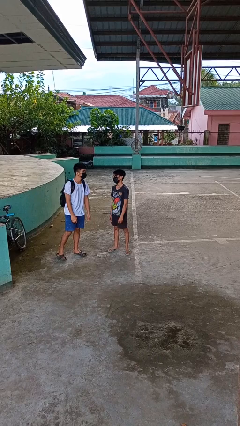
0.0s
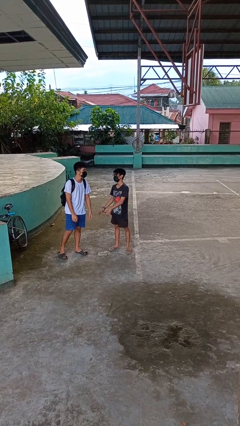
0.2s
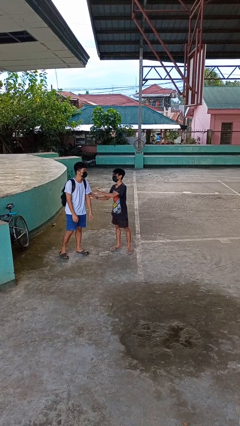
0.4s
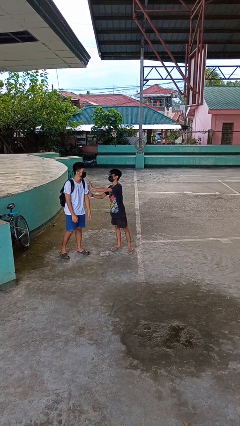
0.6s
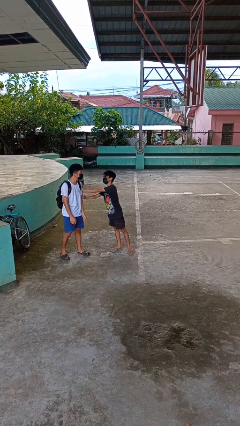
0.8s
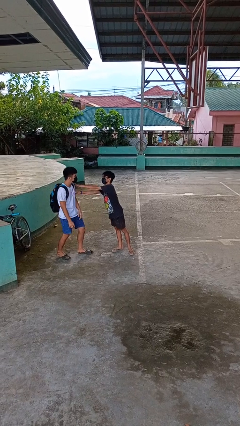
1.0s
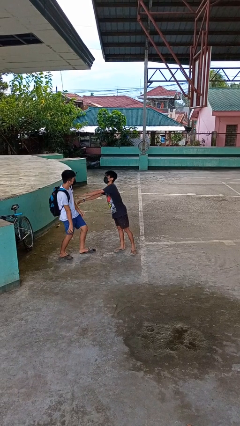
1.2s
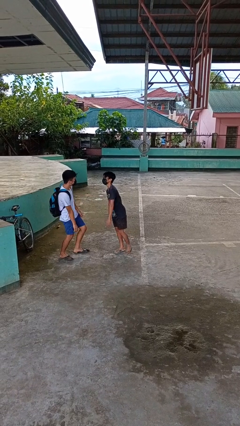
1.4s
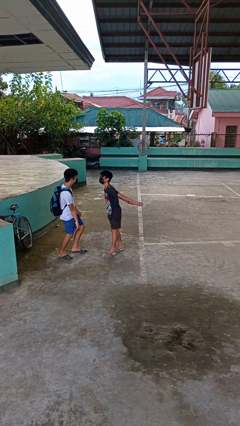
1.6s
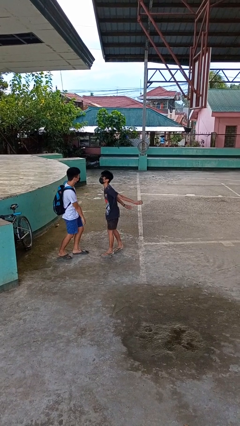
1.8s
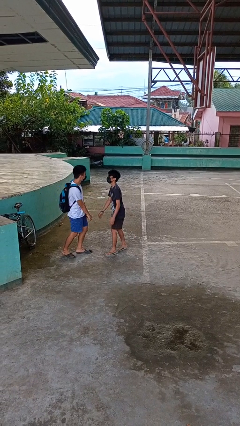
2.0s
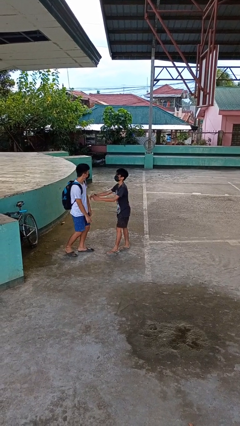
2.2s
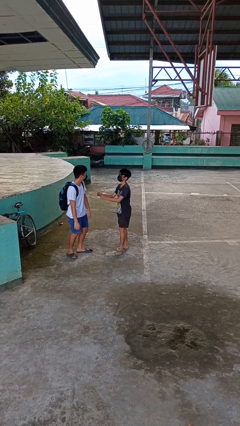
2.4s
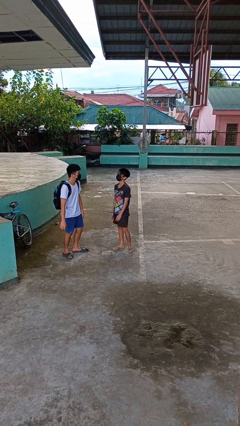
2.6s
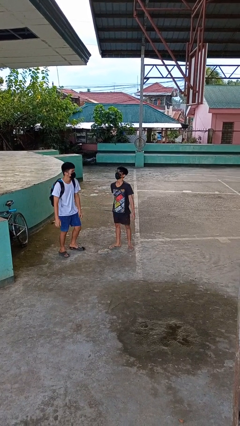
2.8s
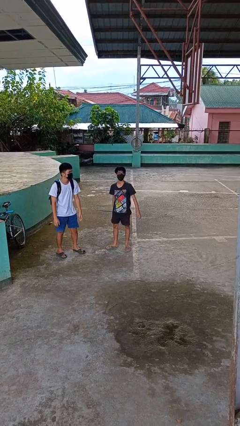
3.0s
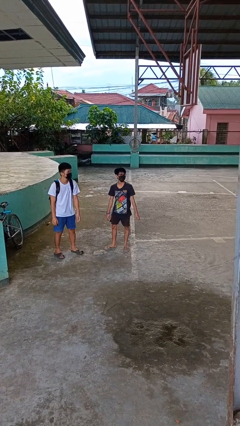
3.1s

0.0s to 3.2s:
person shoves person

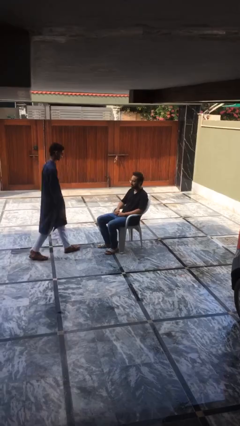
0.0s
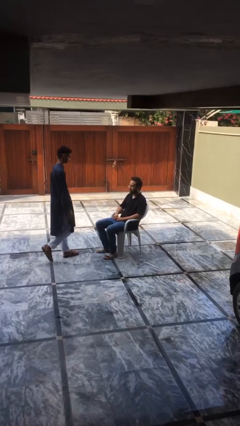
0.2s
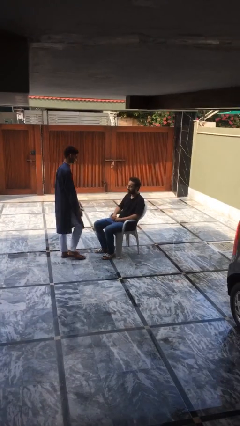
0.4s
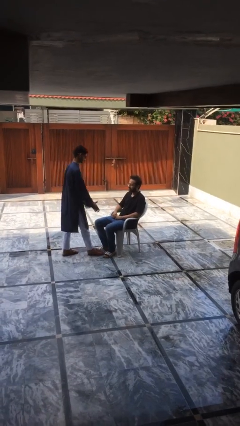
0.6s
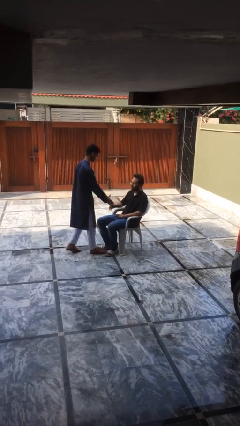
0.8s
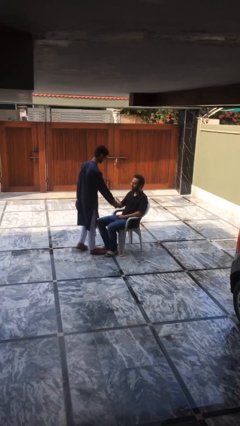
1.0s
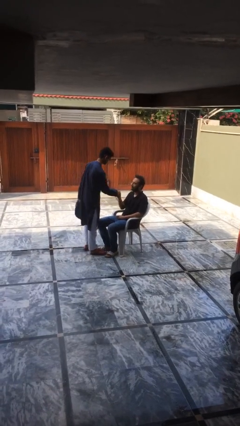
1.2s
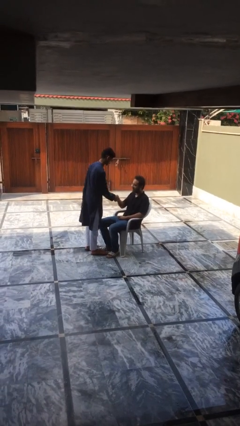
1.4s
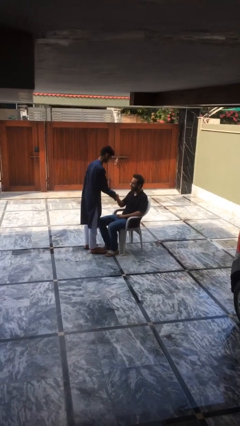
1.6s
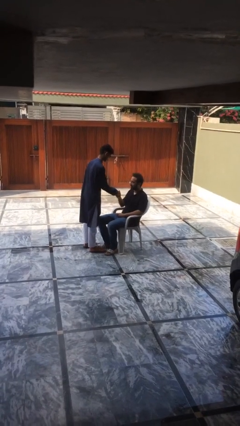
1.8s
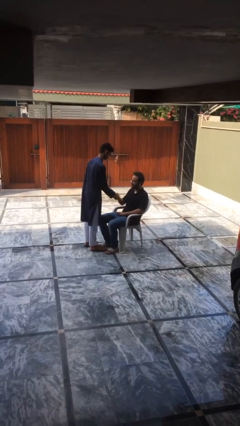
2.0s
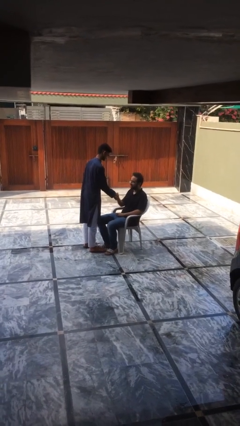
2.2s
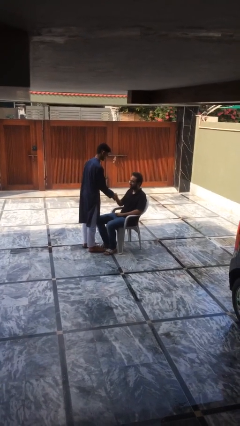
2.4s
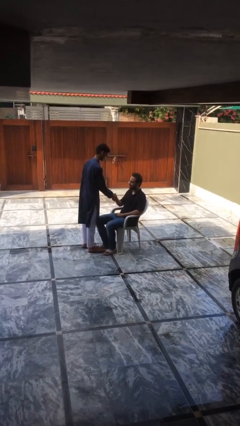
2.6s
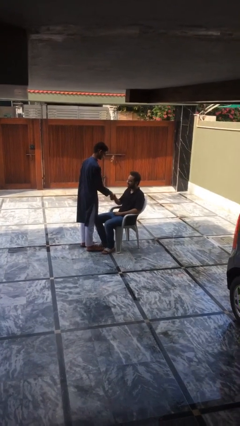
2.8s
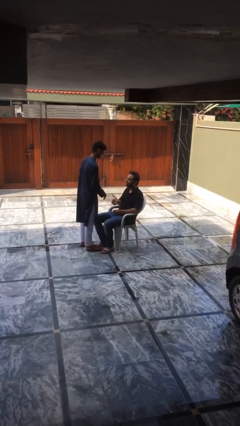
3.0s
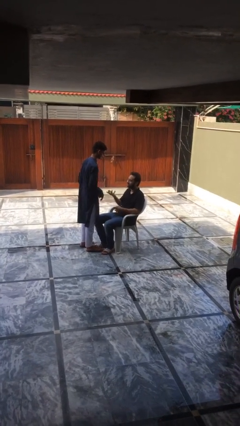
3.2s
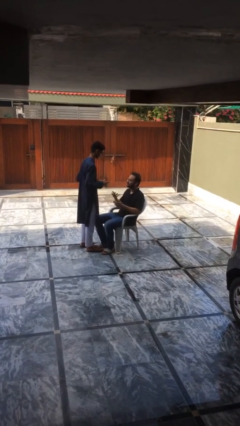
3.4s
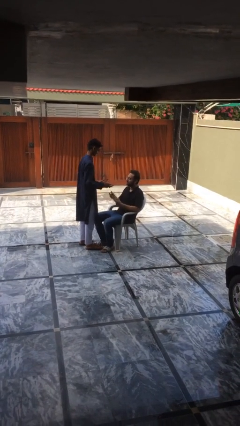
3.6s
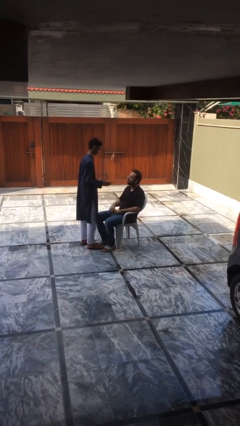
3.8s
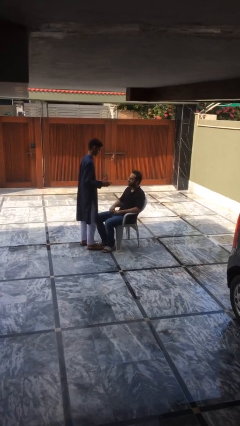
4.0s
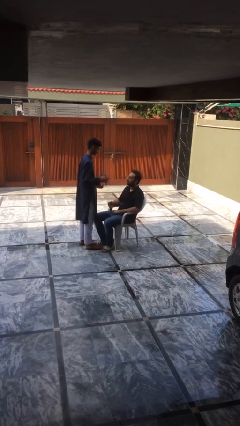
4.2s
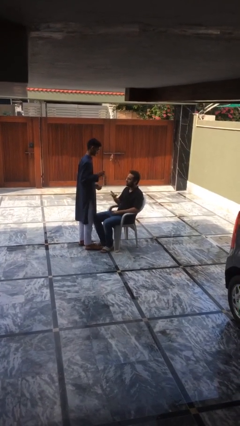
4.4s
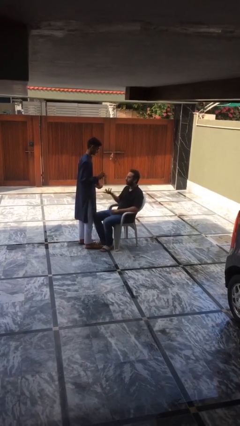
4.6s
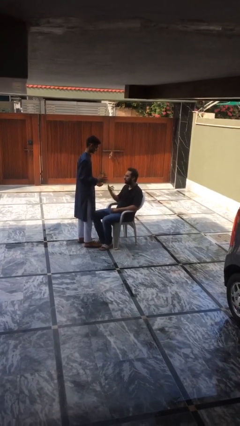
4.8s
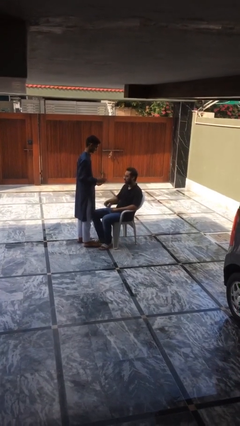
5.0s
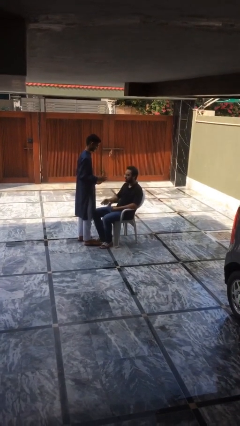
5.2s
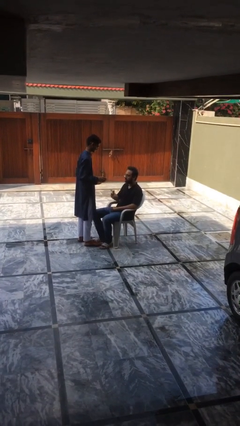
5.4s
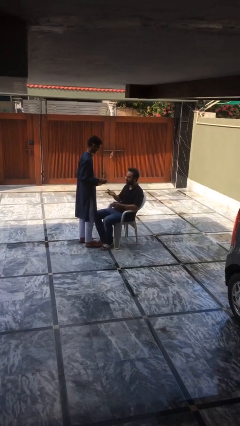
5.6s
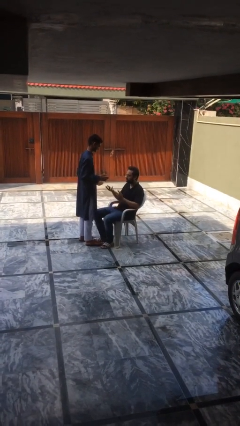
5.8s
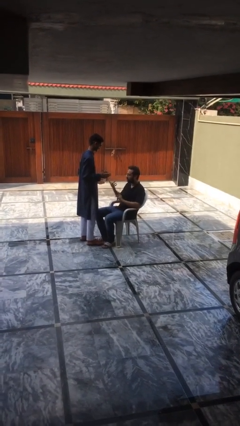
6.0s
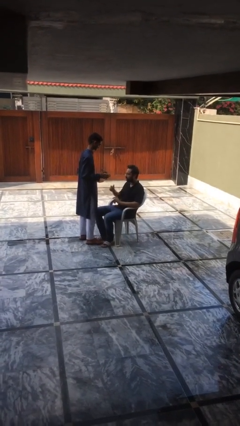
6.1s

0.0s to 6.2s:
person shakes hand

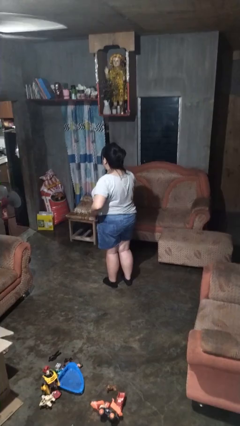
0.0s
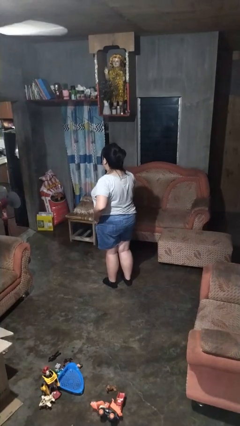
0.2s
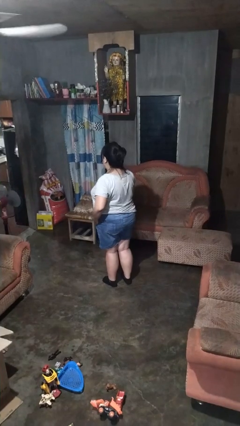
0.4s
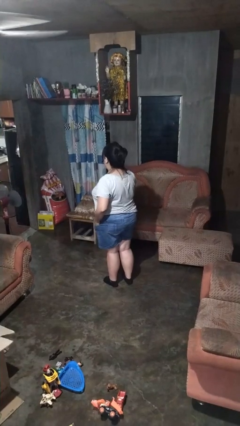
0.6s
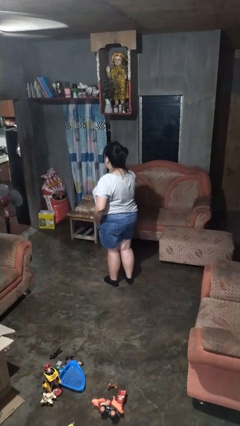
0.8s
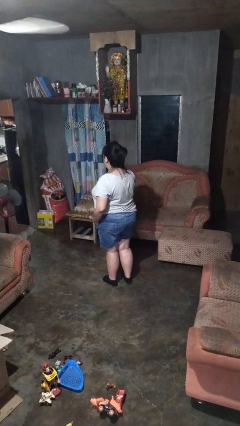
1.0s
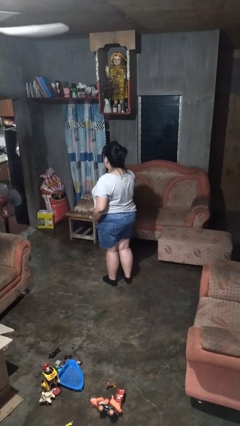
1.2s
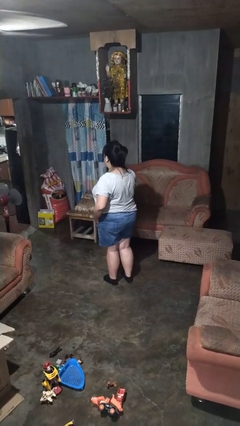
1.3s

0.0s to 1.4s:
person puts hands in back pockets

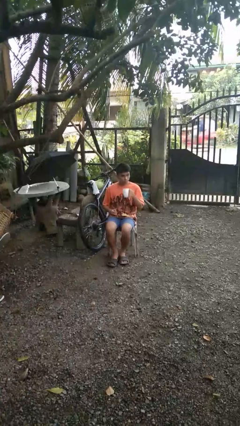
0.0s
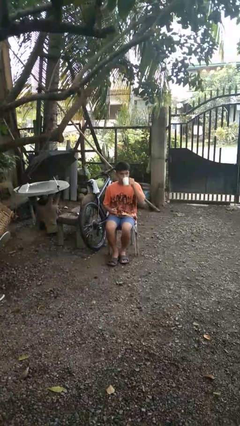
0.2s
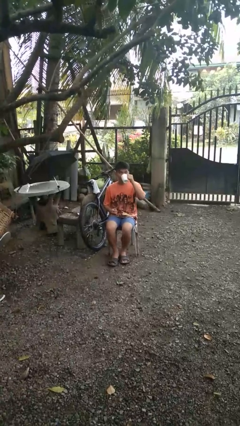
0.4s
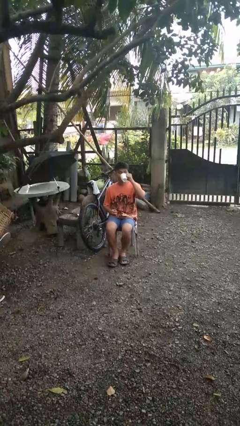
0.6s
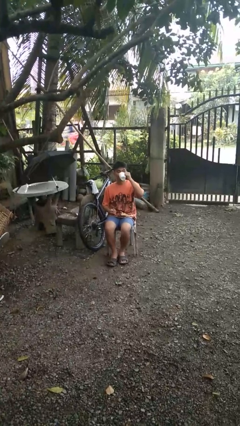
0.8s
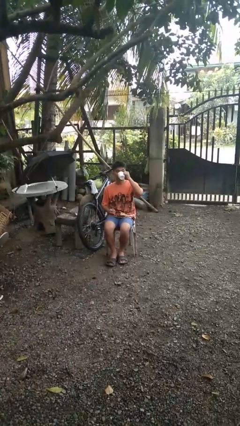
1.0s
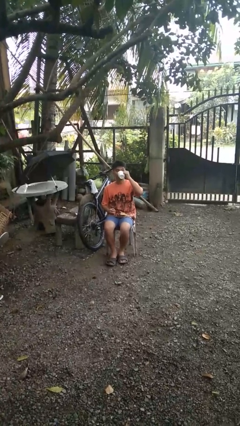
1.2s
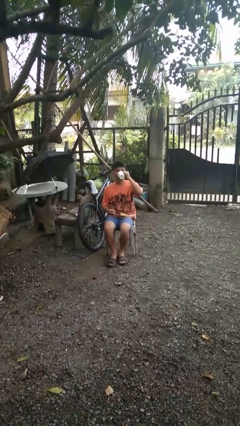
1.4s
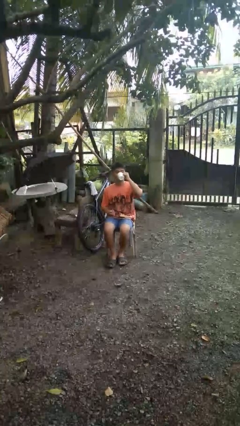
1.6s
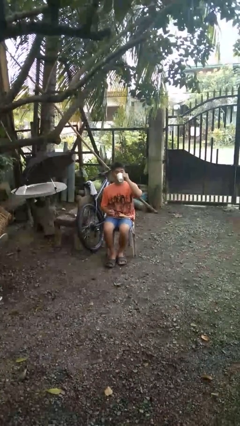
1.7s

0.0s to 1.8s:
person drinks from mug

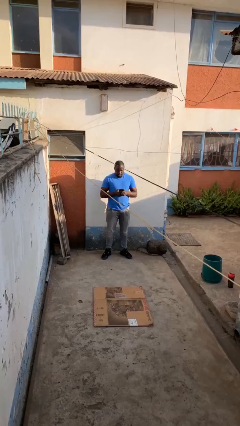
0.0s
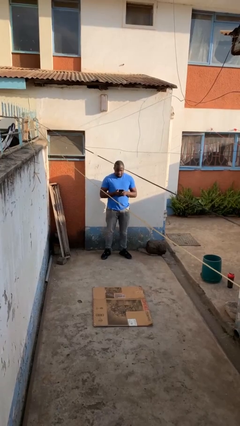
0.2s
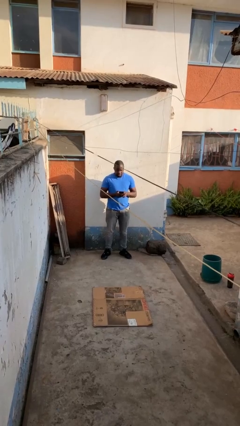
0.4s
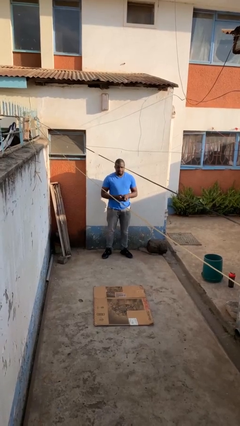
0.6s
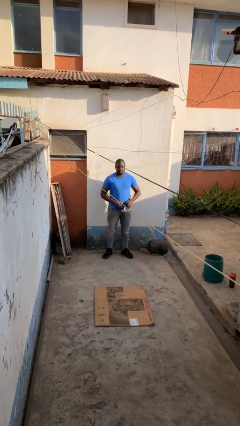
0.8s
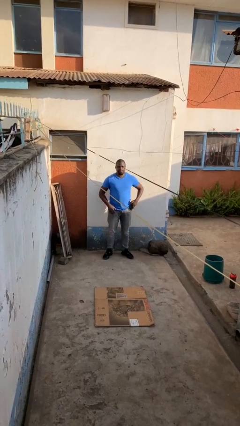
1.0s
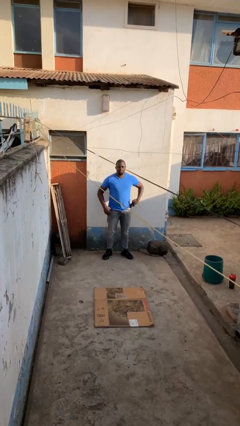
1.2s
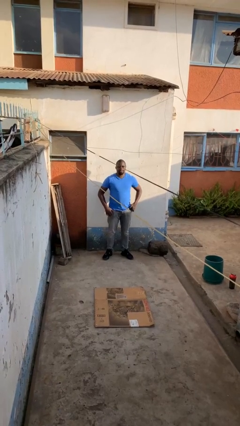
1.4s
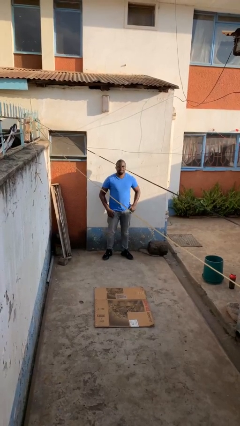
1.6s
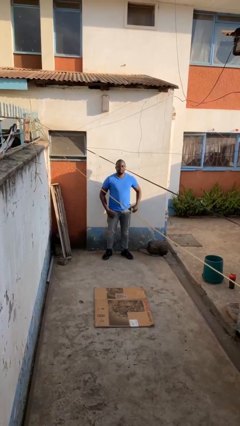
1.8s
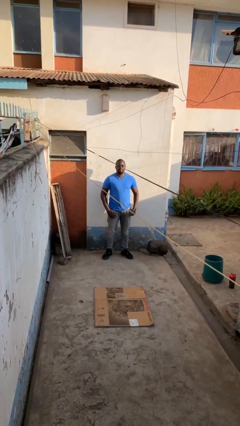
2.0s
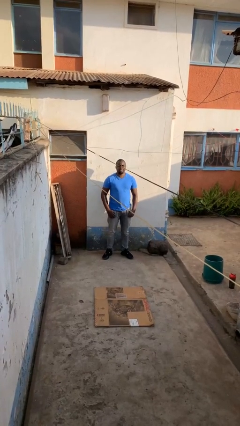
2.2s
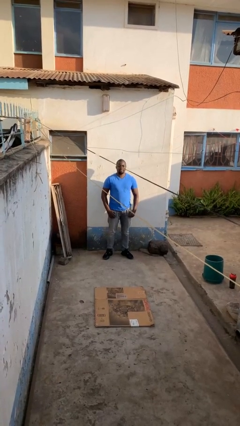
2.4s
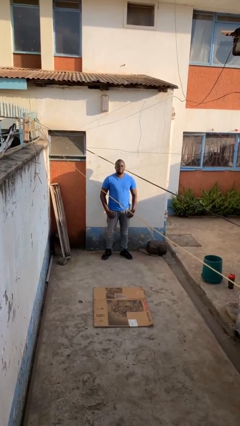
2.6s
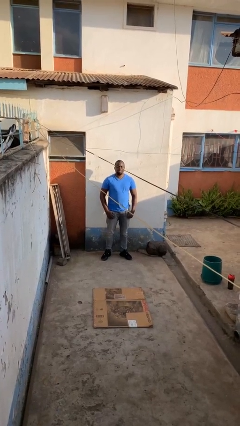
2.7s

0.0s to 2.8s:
person puts phone into pocket

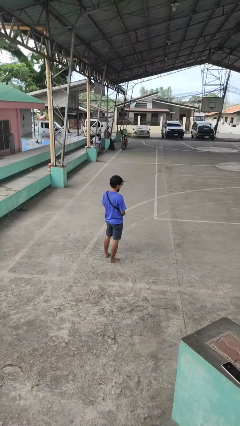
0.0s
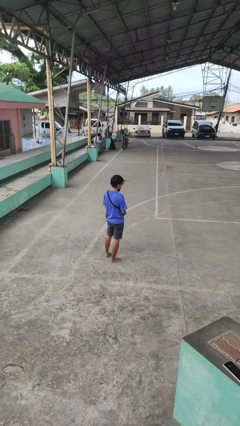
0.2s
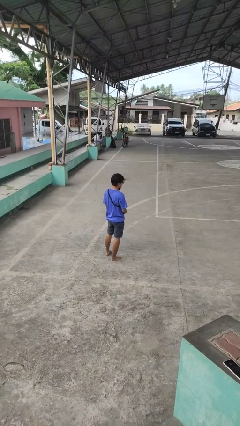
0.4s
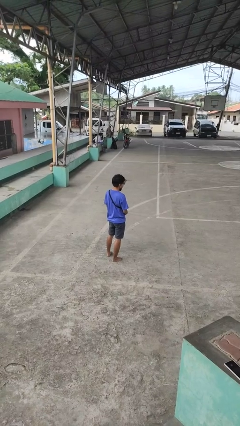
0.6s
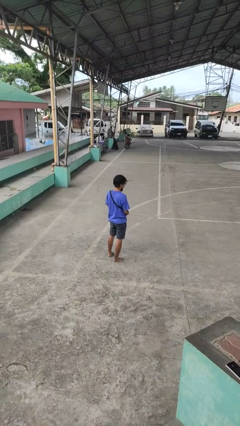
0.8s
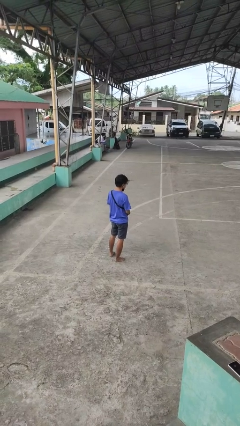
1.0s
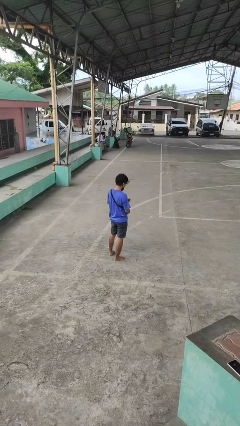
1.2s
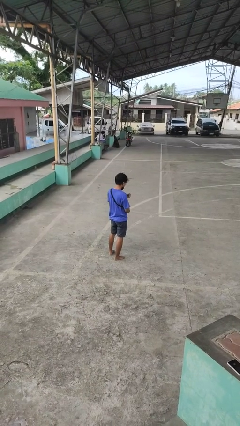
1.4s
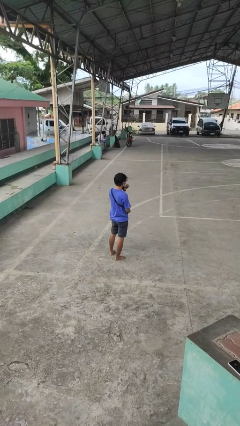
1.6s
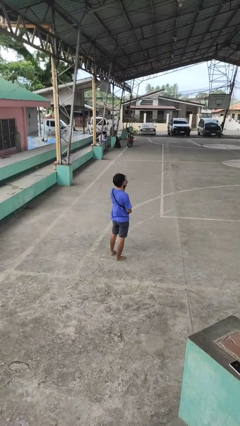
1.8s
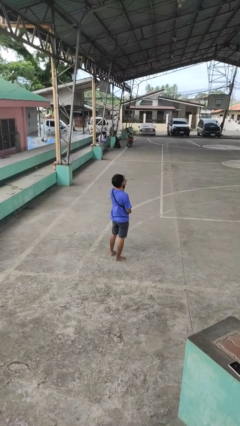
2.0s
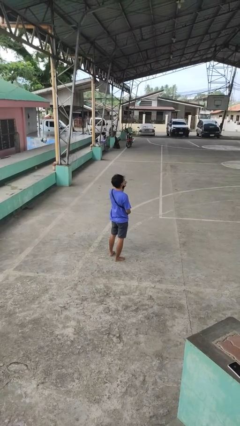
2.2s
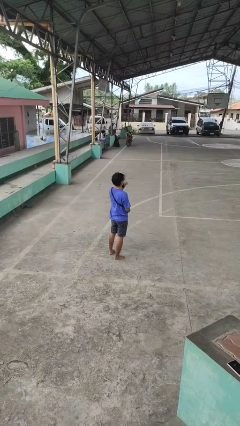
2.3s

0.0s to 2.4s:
person eats snack from bag
